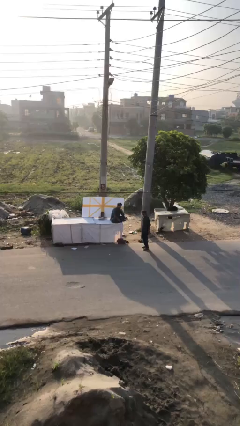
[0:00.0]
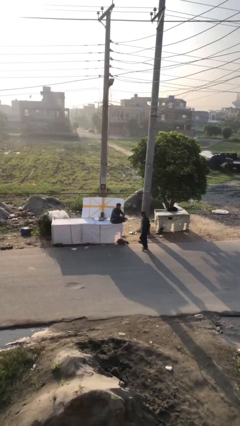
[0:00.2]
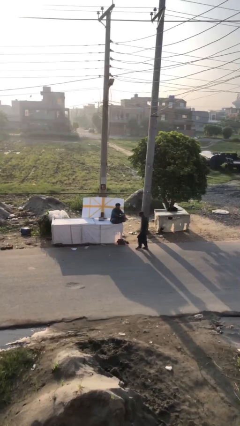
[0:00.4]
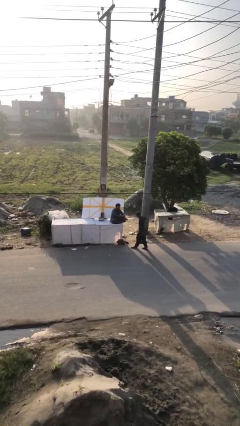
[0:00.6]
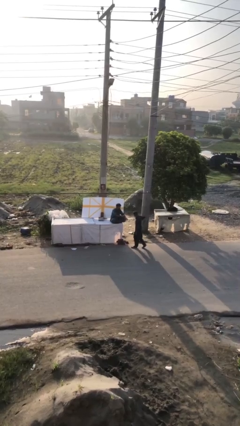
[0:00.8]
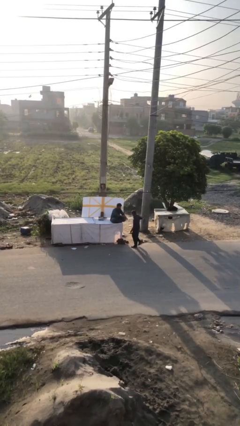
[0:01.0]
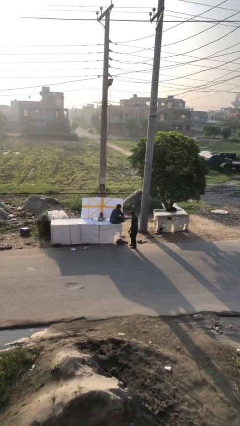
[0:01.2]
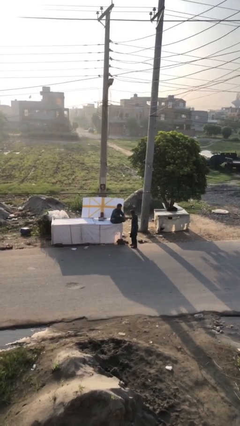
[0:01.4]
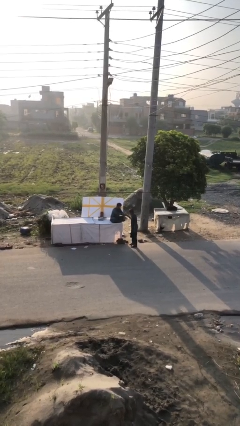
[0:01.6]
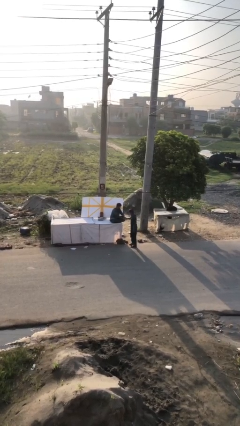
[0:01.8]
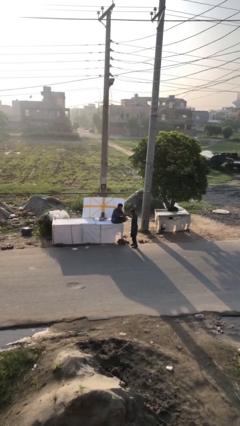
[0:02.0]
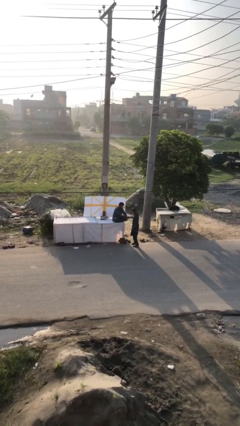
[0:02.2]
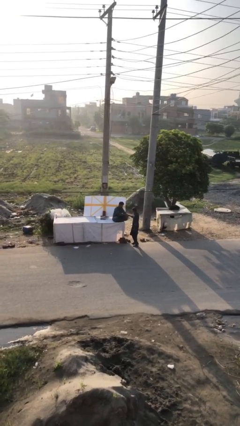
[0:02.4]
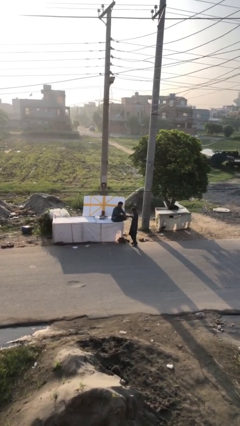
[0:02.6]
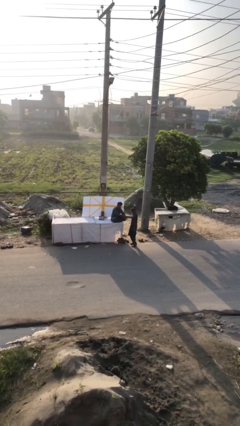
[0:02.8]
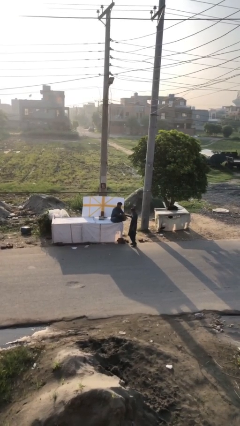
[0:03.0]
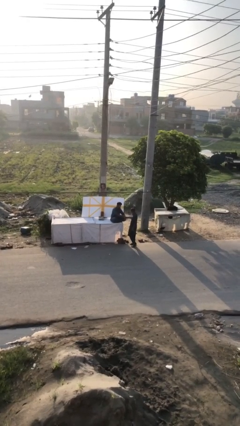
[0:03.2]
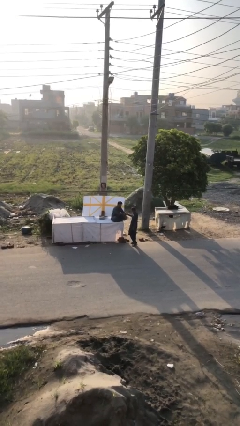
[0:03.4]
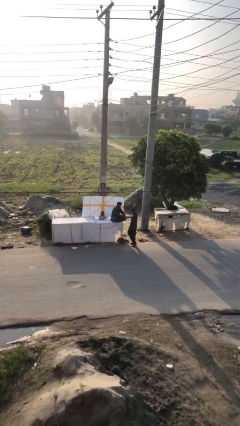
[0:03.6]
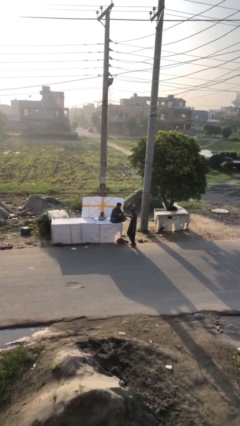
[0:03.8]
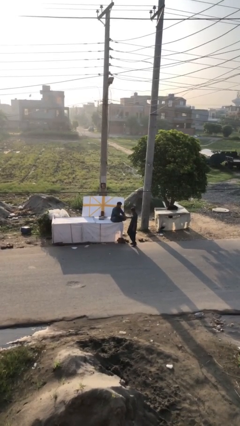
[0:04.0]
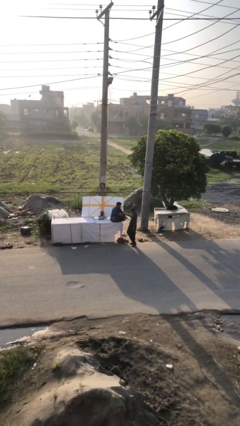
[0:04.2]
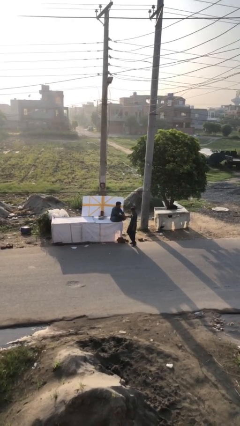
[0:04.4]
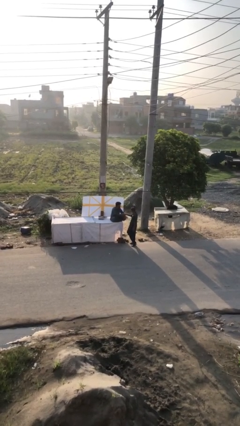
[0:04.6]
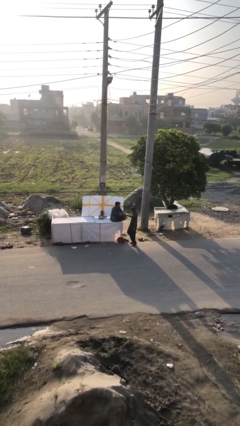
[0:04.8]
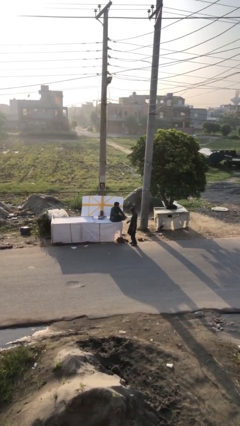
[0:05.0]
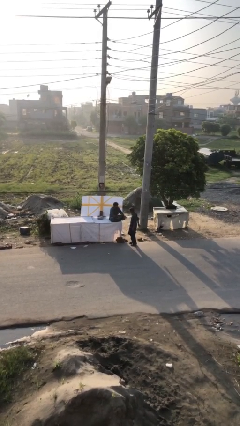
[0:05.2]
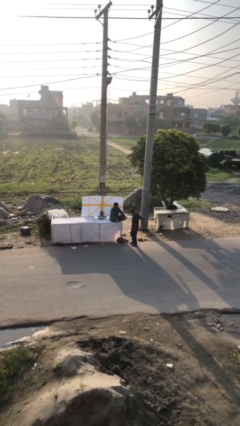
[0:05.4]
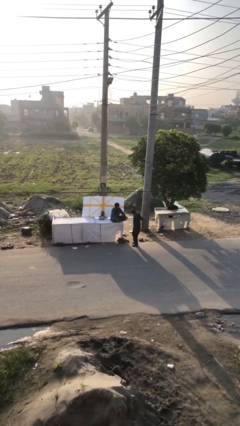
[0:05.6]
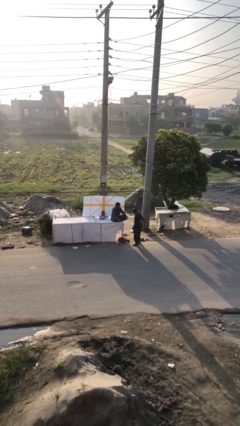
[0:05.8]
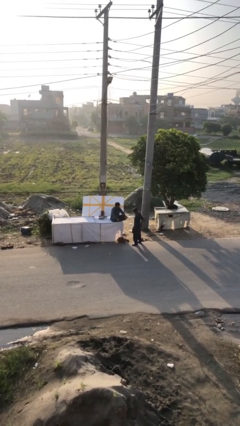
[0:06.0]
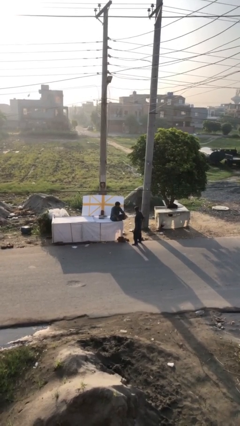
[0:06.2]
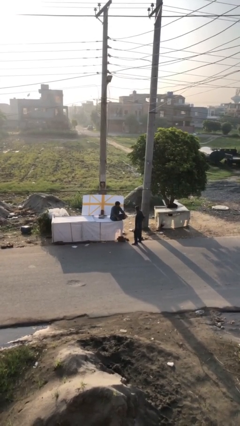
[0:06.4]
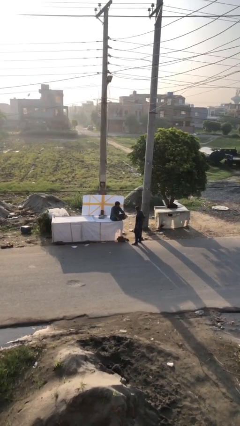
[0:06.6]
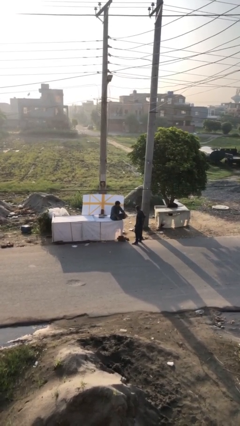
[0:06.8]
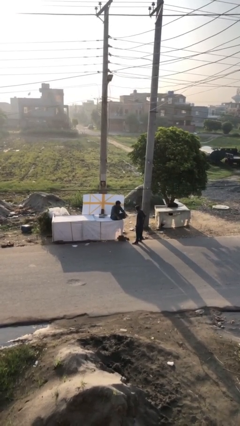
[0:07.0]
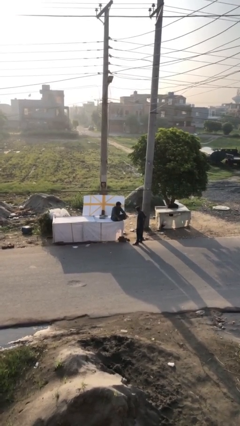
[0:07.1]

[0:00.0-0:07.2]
person shakes hand

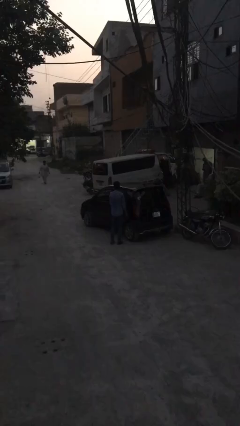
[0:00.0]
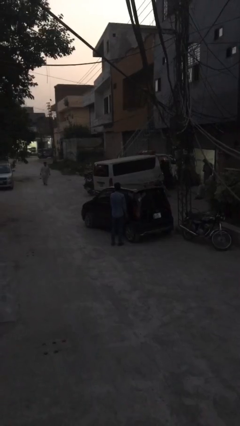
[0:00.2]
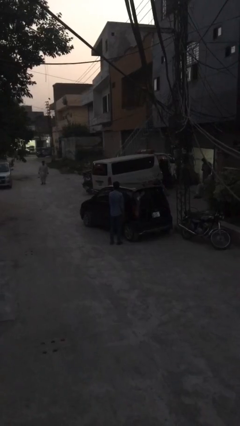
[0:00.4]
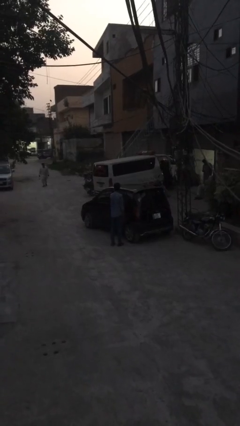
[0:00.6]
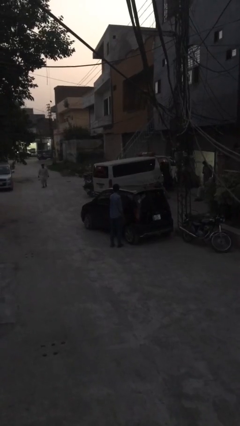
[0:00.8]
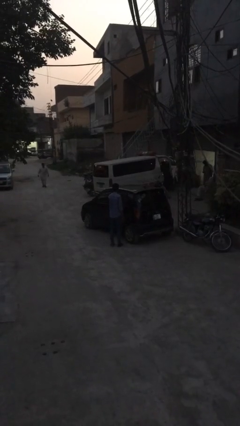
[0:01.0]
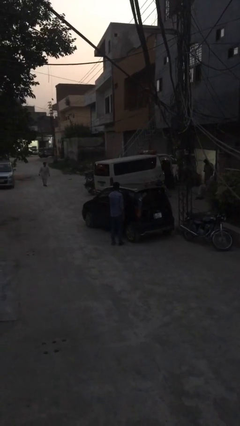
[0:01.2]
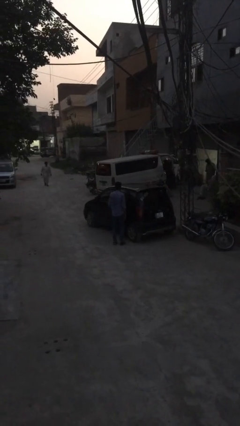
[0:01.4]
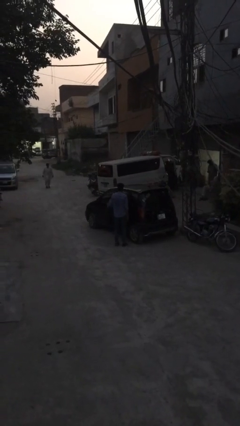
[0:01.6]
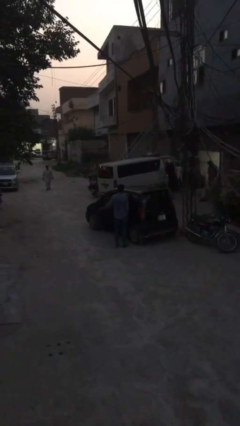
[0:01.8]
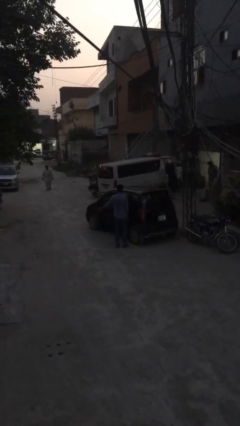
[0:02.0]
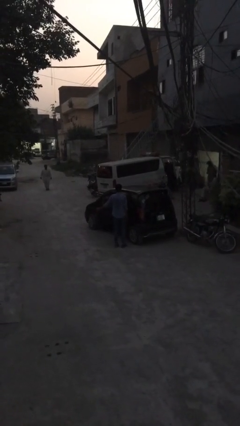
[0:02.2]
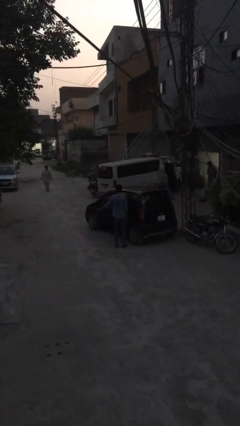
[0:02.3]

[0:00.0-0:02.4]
person opens car door

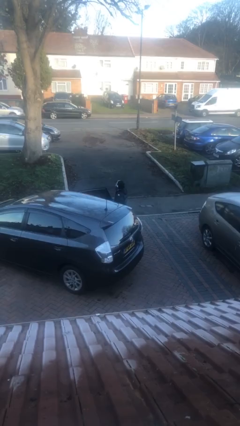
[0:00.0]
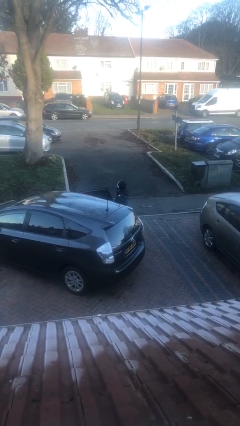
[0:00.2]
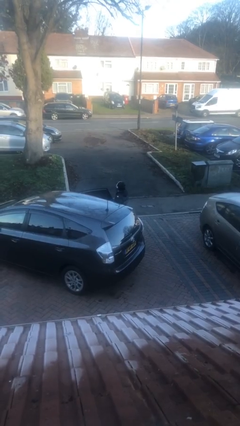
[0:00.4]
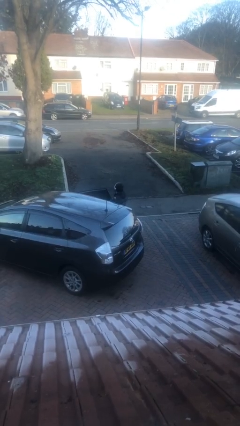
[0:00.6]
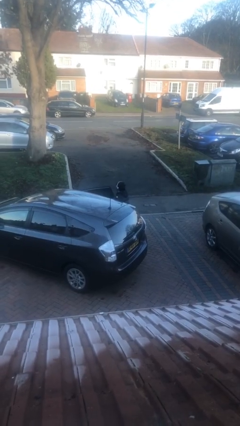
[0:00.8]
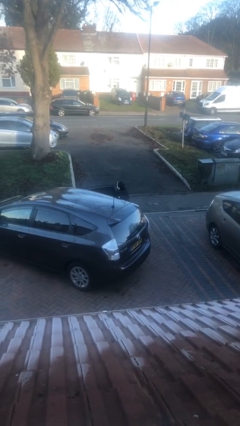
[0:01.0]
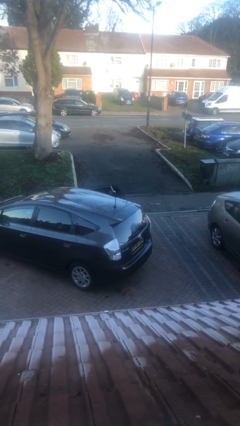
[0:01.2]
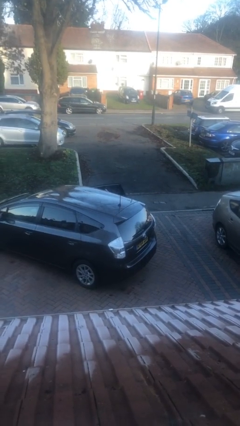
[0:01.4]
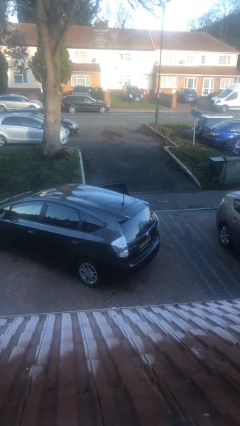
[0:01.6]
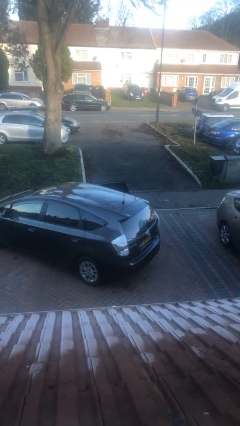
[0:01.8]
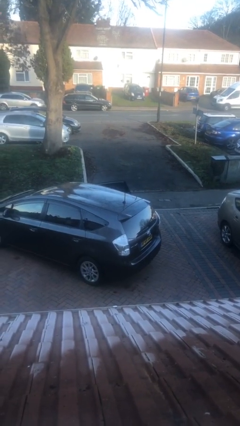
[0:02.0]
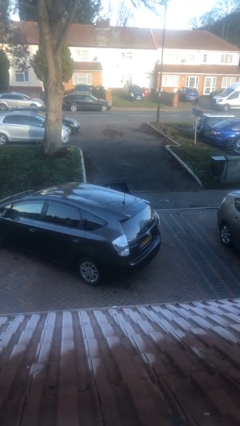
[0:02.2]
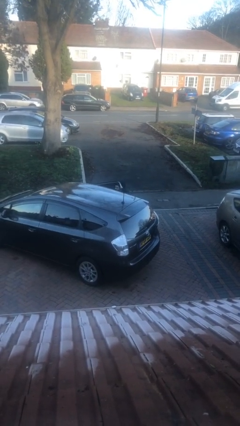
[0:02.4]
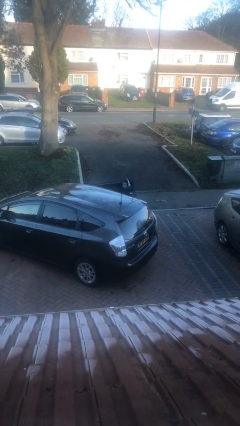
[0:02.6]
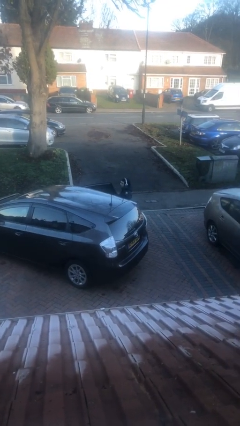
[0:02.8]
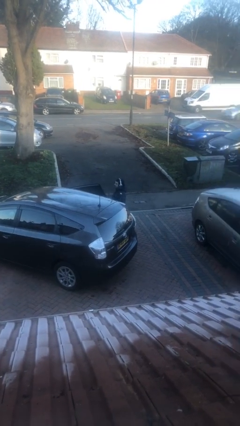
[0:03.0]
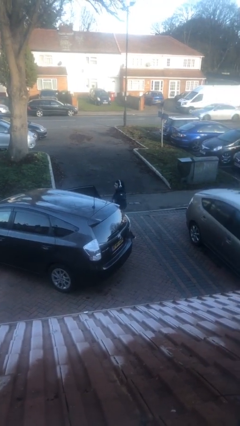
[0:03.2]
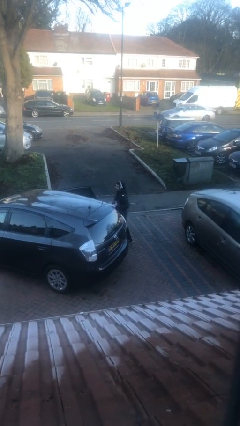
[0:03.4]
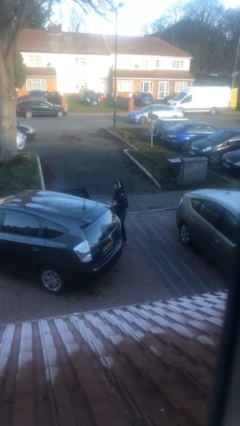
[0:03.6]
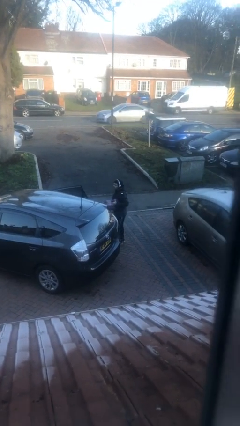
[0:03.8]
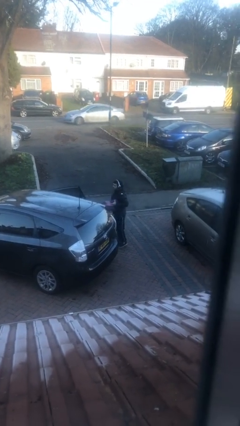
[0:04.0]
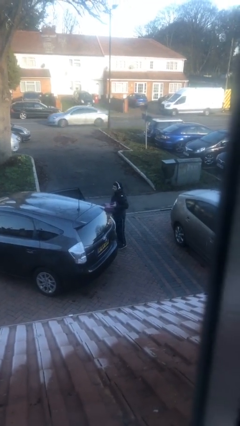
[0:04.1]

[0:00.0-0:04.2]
person unloads car

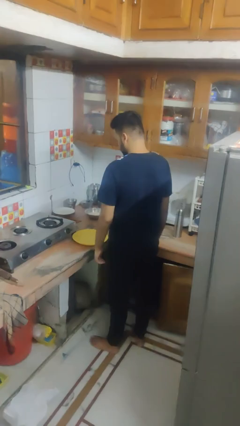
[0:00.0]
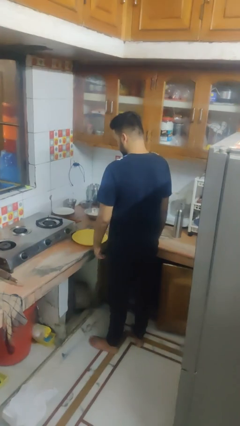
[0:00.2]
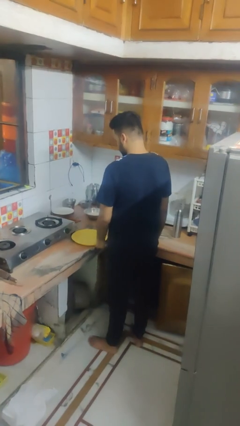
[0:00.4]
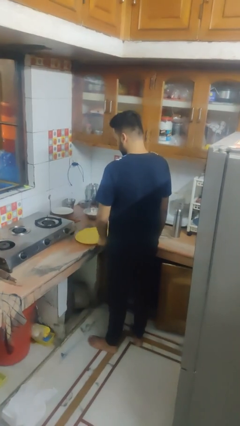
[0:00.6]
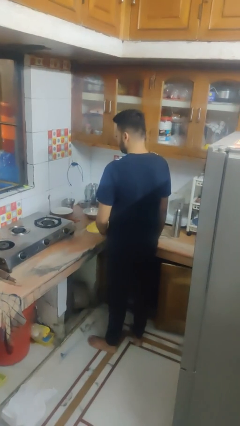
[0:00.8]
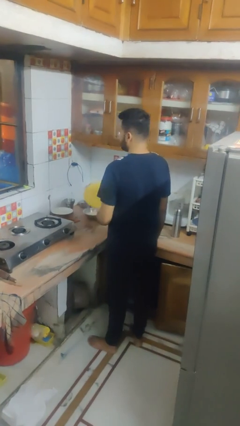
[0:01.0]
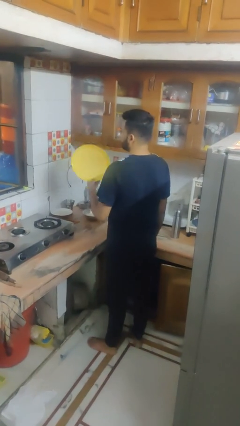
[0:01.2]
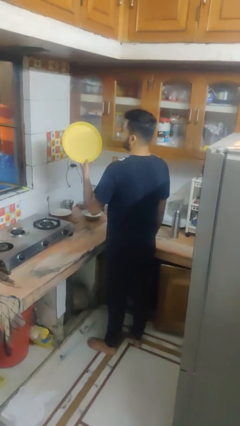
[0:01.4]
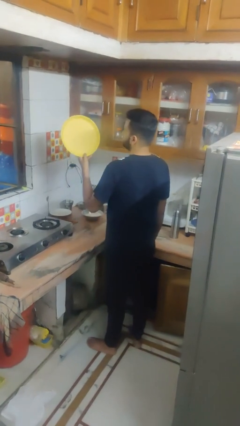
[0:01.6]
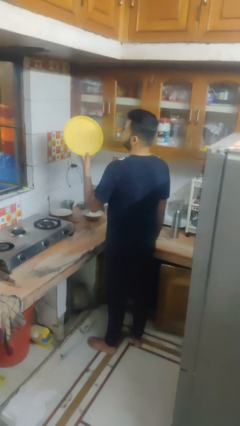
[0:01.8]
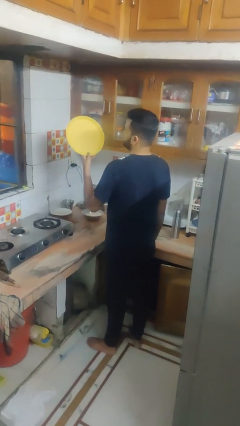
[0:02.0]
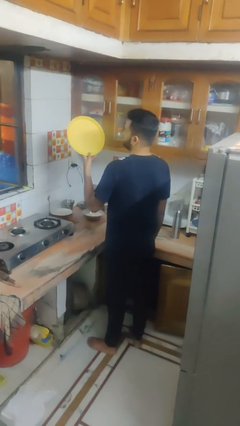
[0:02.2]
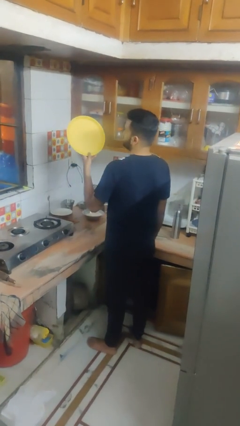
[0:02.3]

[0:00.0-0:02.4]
person picks up object from countertop

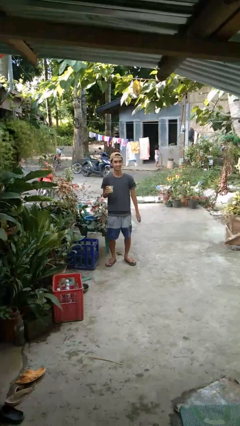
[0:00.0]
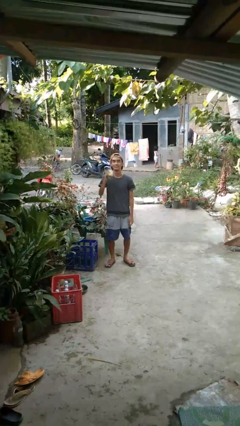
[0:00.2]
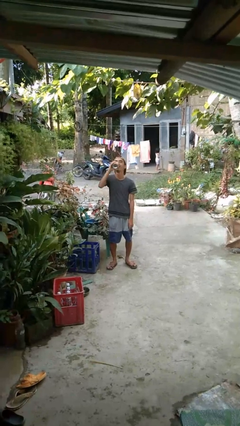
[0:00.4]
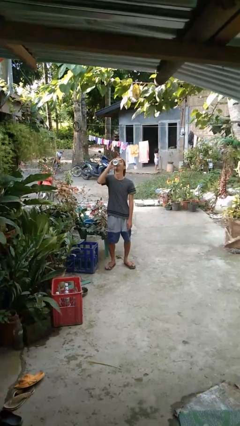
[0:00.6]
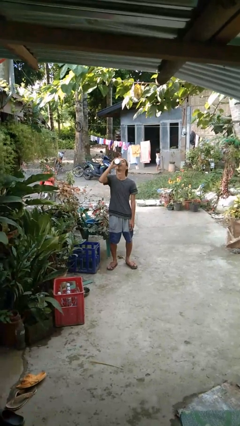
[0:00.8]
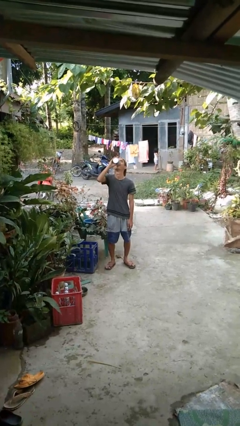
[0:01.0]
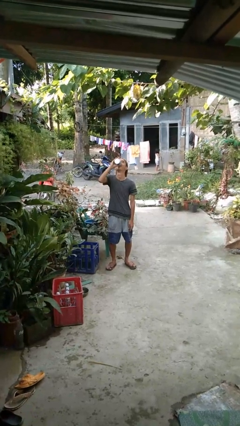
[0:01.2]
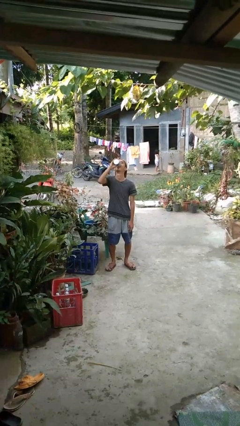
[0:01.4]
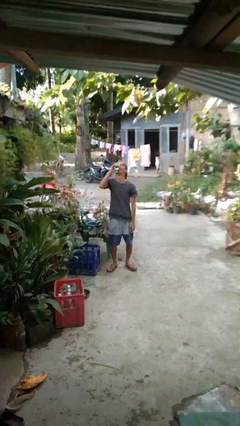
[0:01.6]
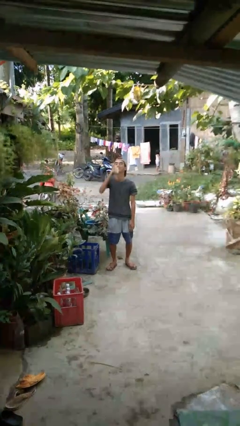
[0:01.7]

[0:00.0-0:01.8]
person drinks from beverage can
